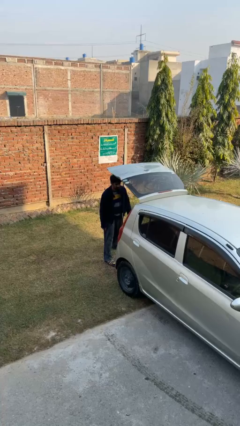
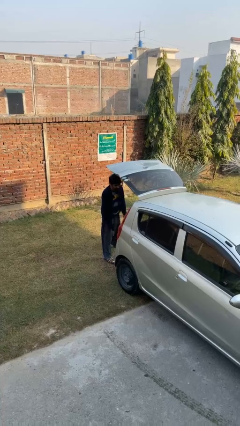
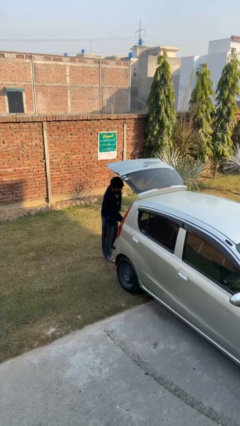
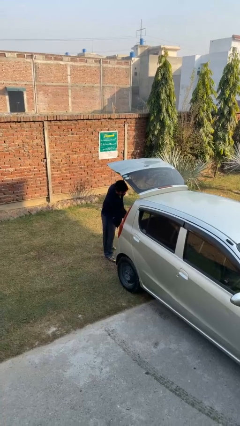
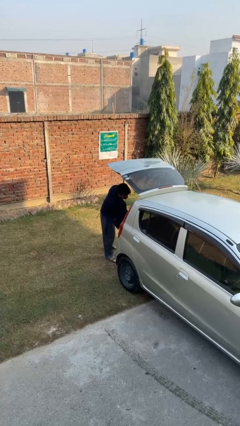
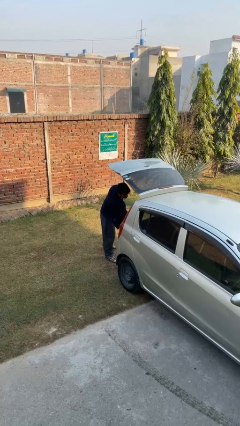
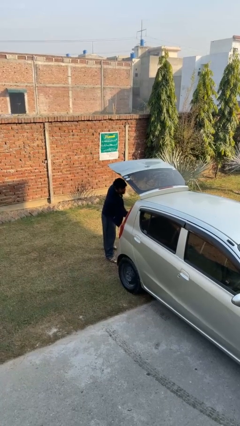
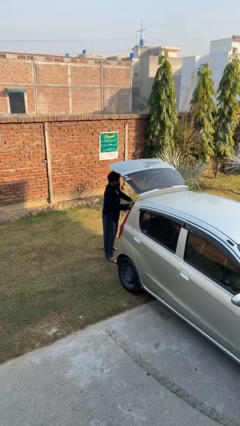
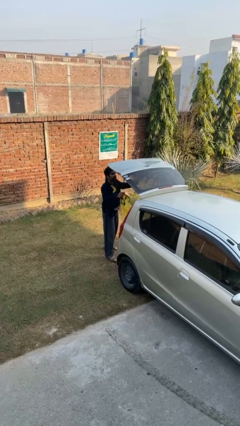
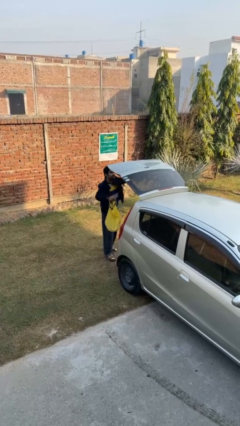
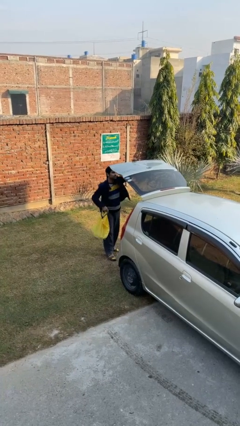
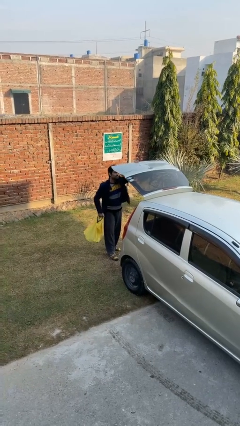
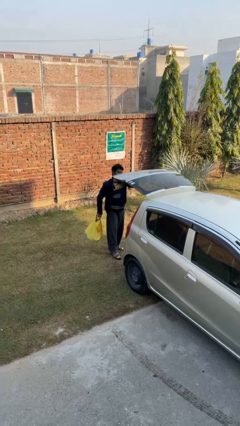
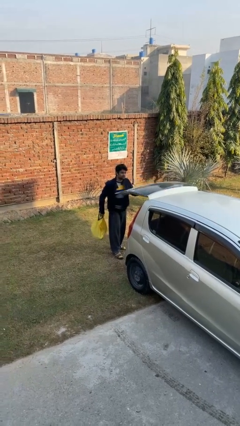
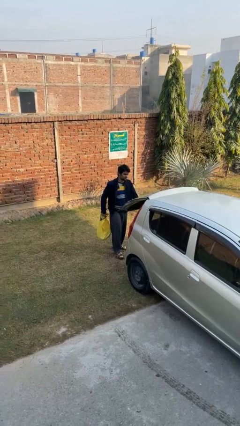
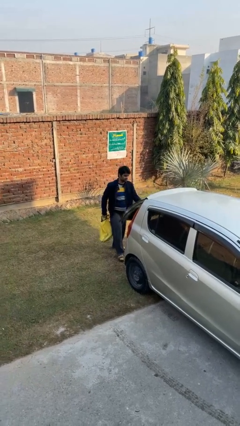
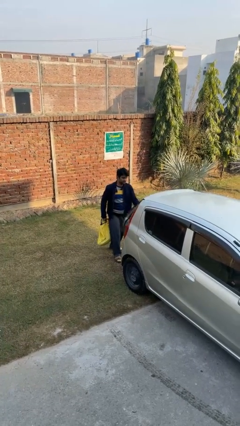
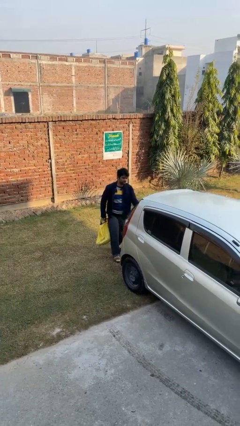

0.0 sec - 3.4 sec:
person unloads car

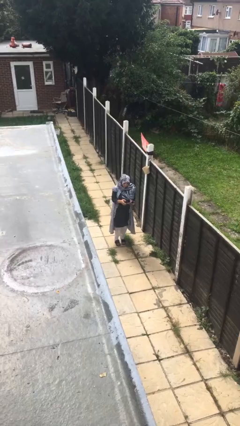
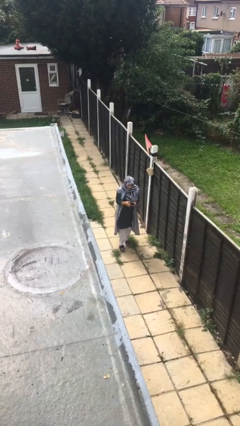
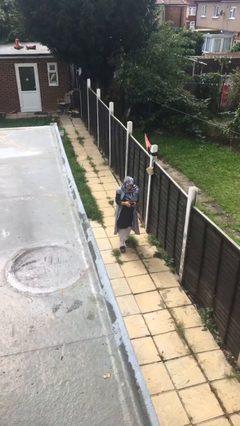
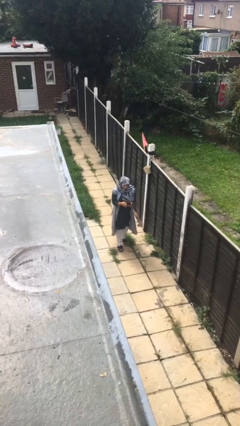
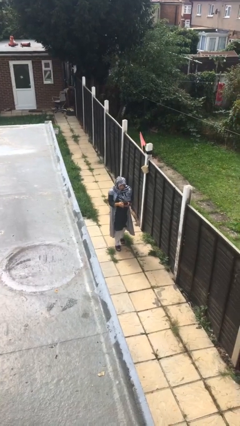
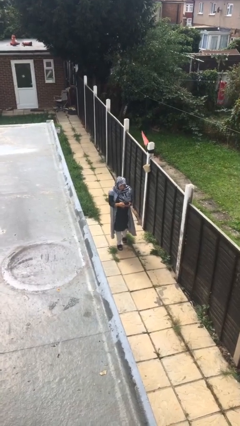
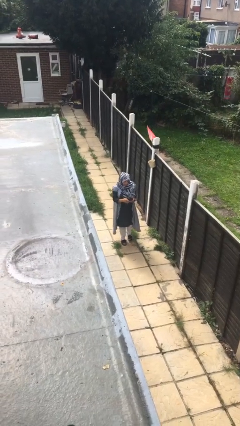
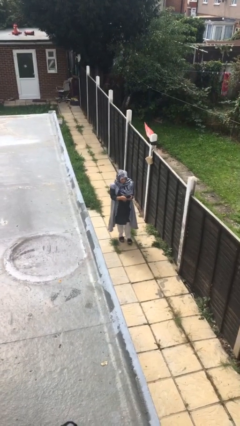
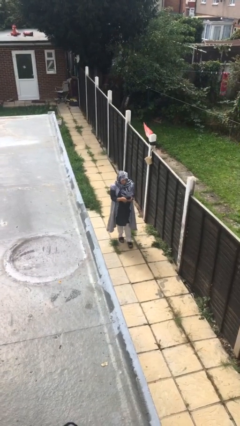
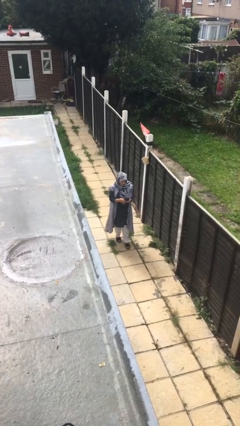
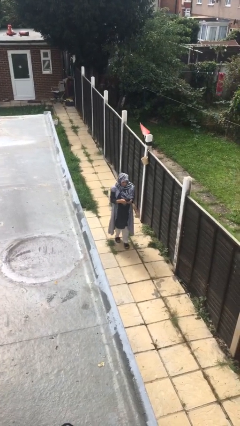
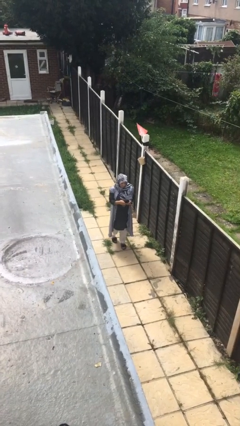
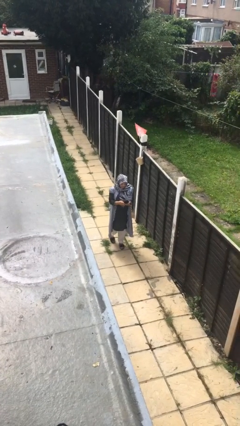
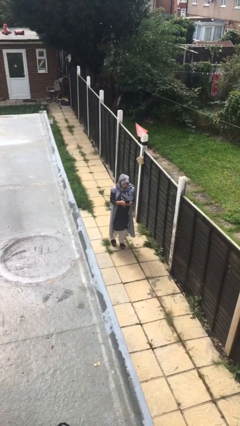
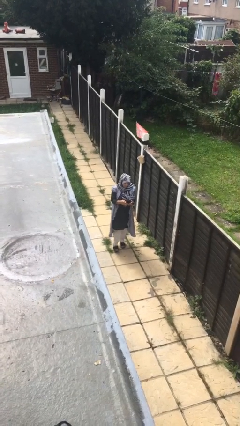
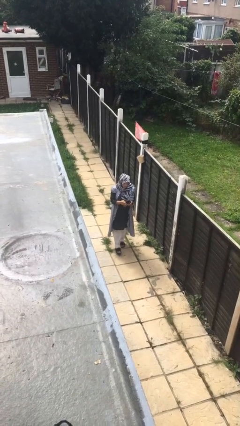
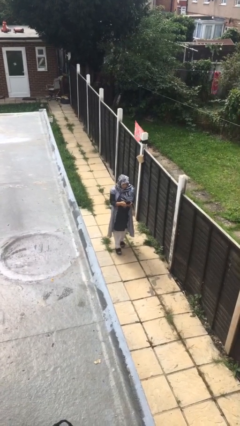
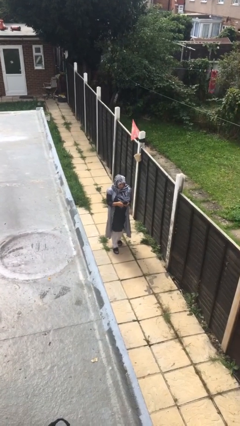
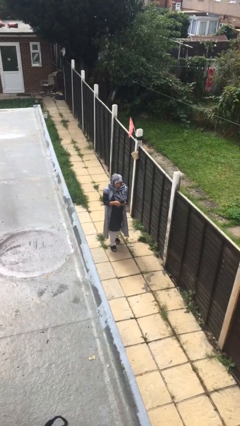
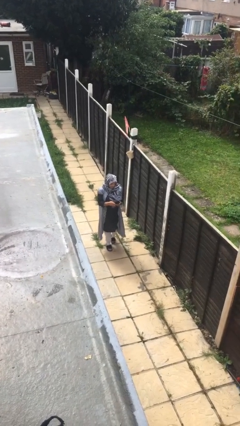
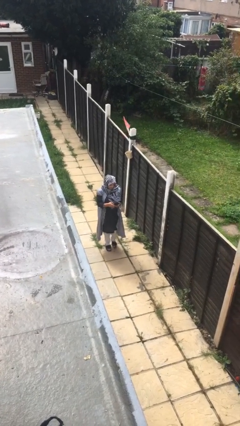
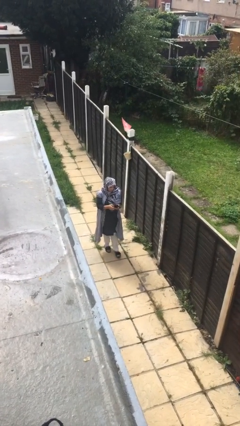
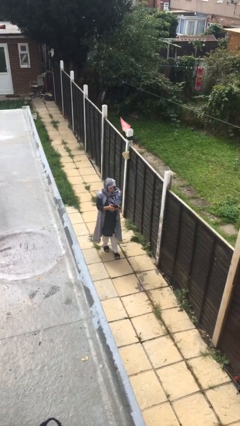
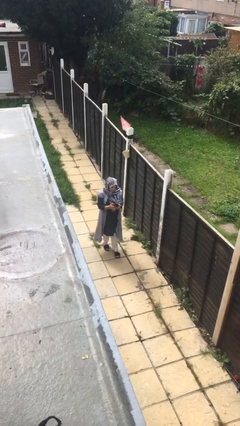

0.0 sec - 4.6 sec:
person texts on phone

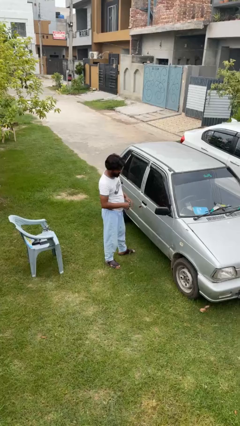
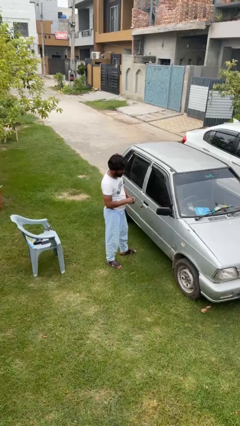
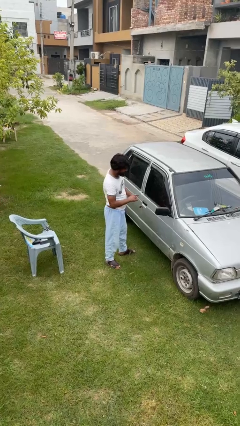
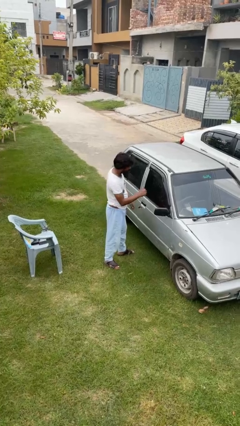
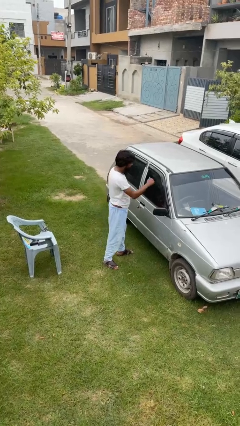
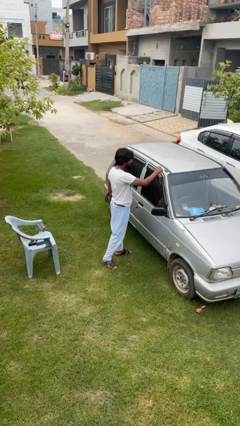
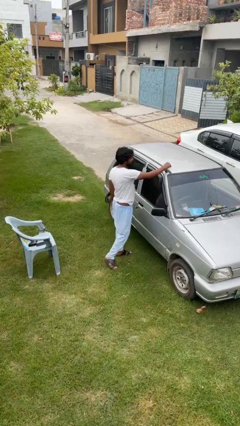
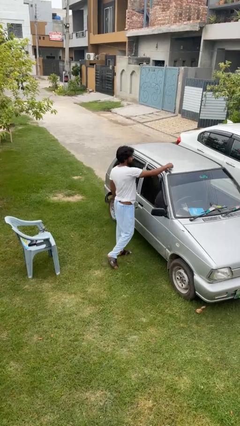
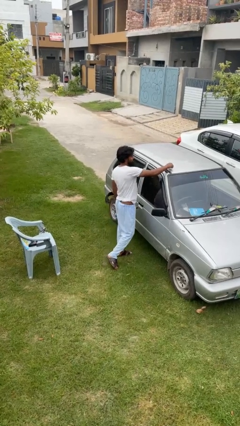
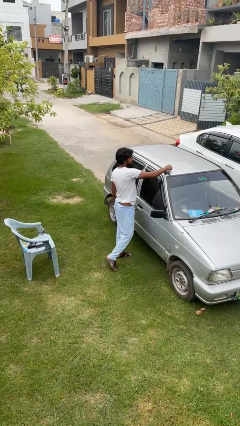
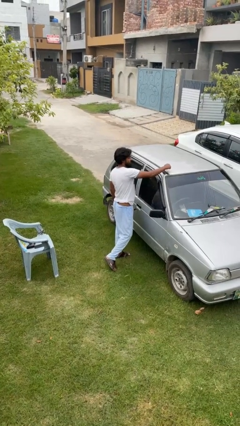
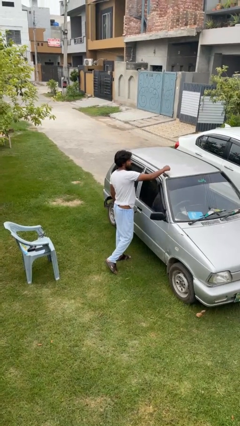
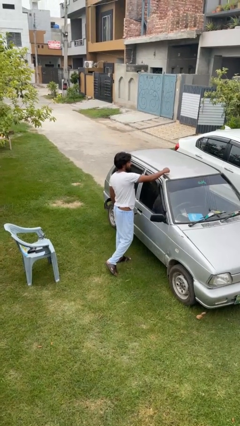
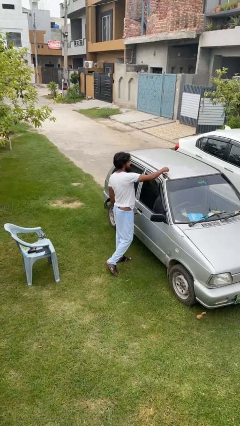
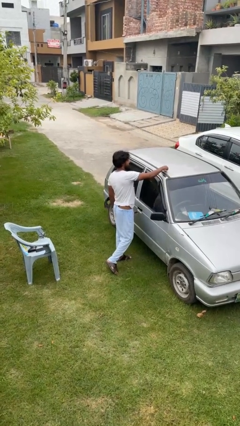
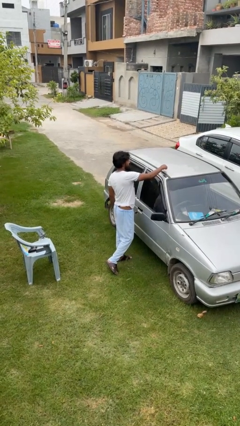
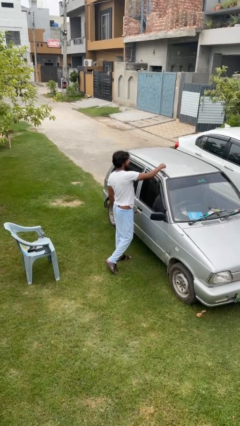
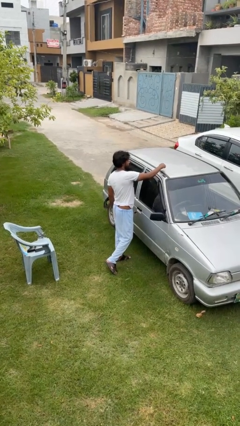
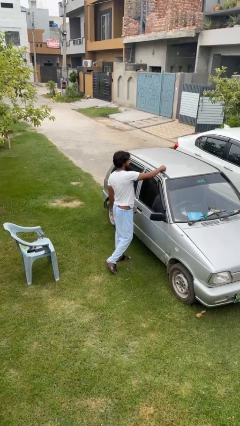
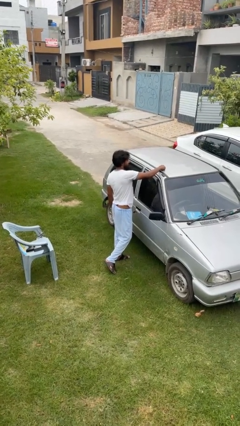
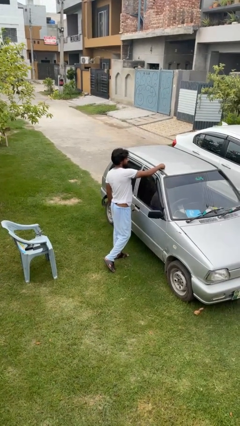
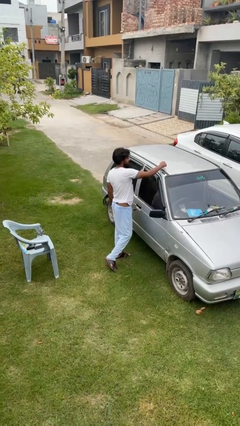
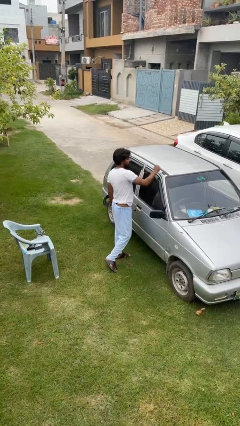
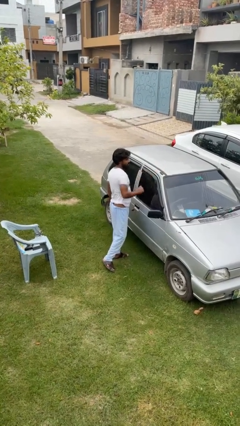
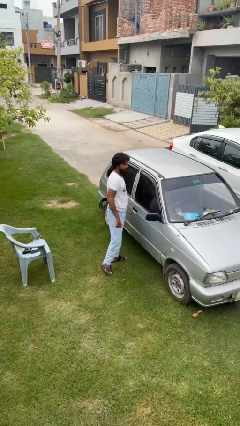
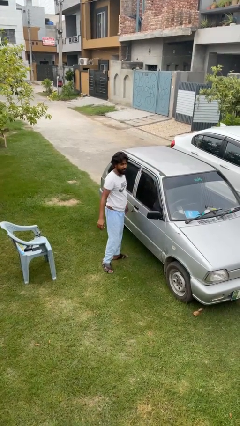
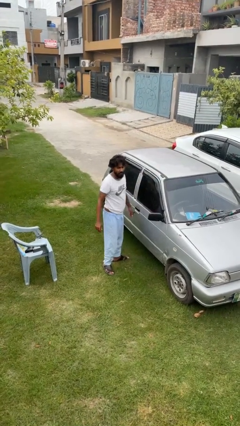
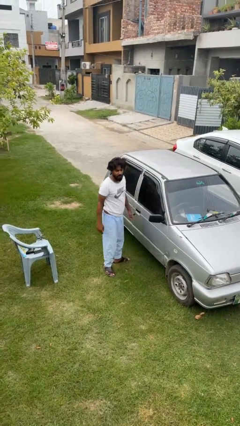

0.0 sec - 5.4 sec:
person taps object with finger

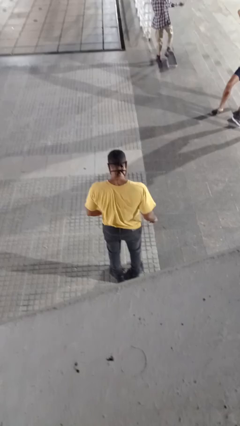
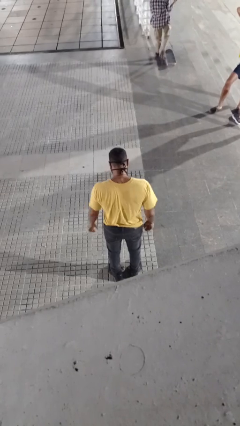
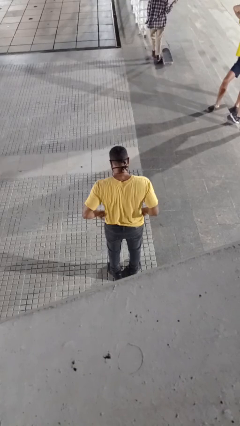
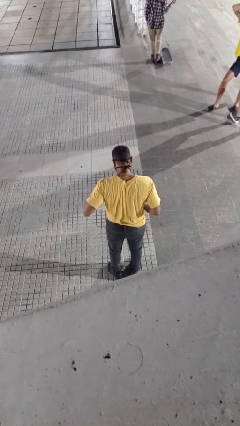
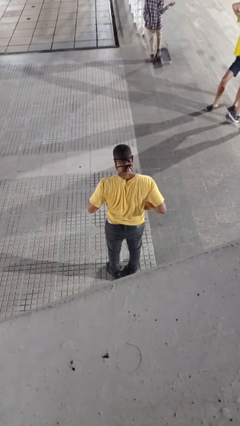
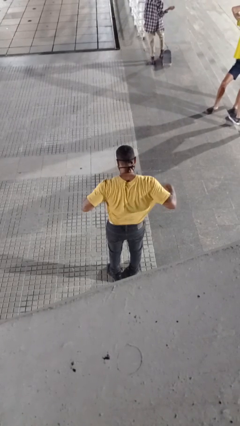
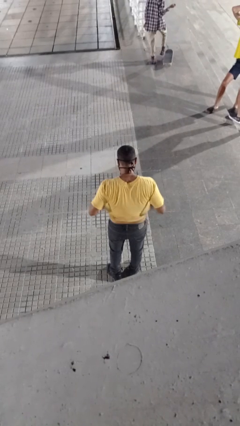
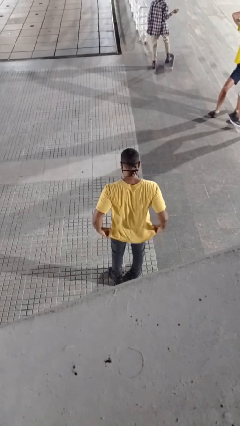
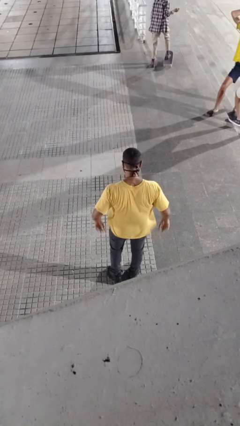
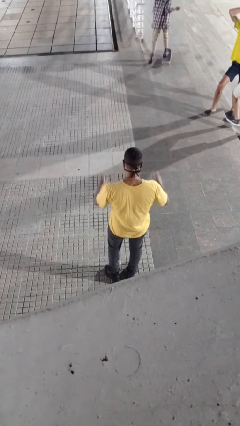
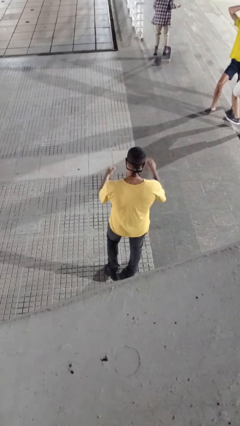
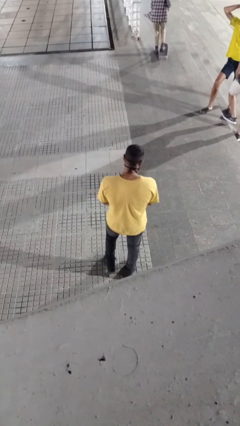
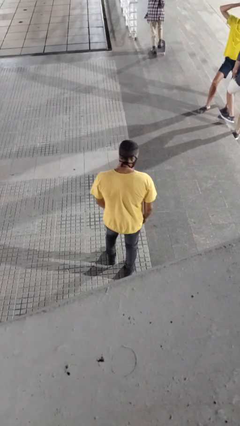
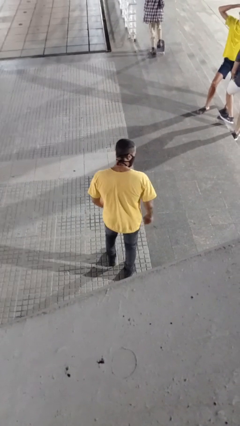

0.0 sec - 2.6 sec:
person untucks shirt

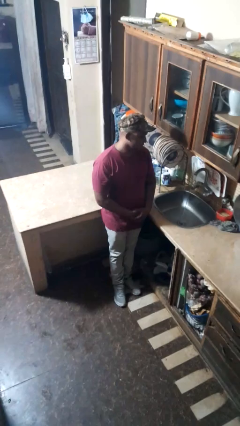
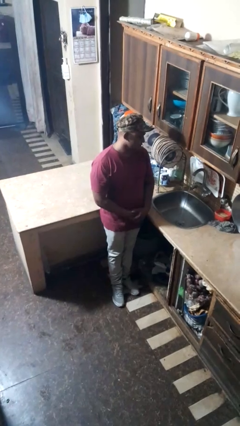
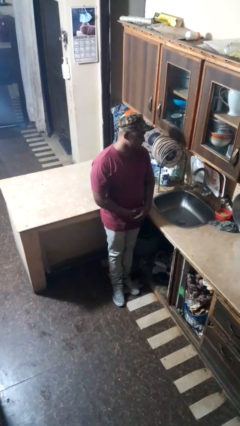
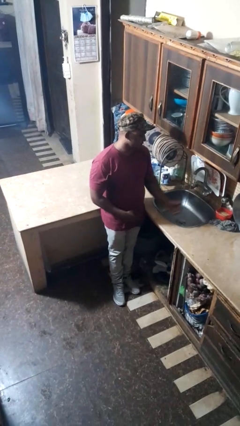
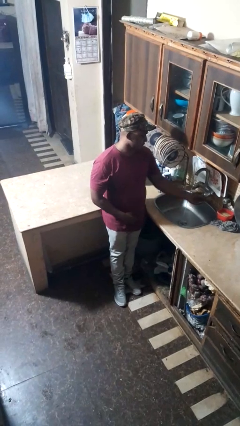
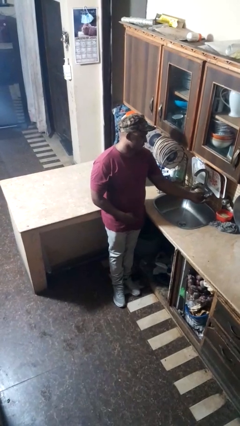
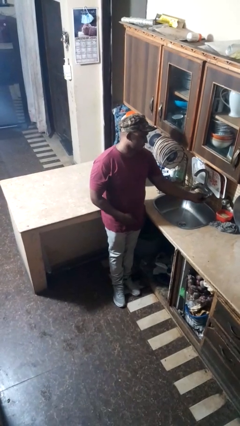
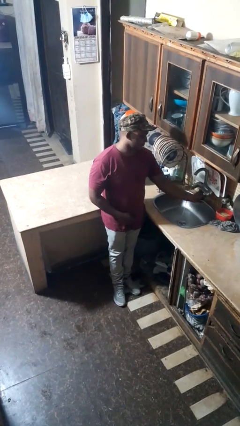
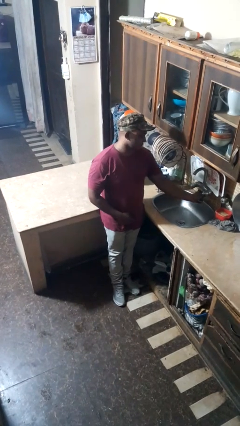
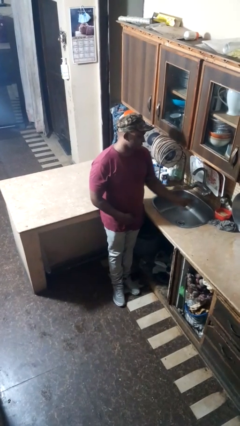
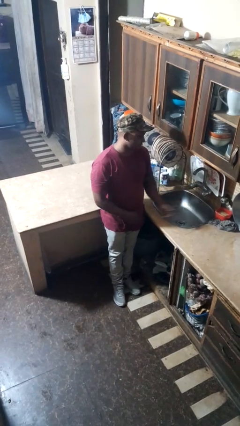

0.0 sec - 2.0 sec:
person turns off faucet
